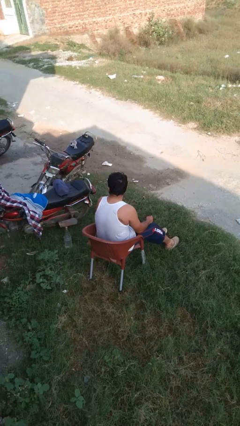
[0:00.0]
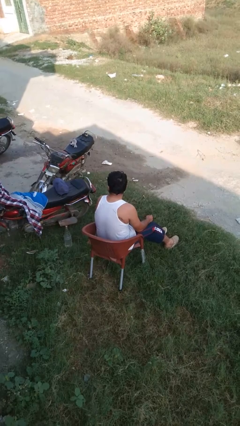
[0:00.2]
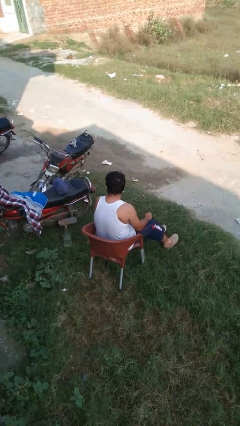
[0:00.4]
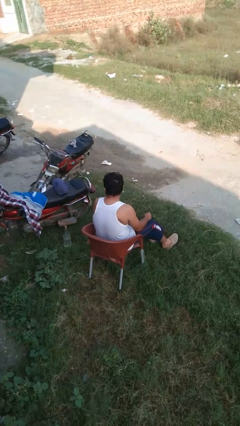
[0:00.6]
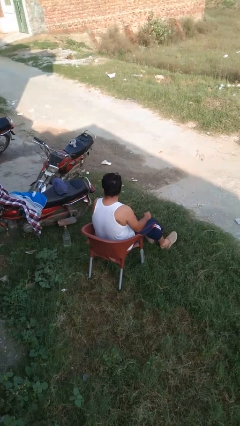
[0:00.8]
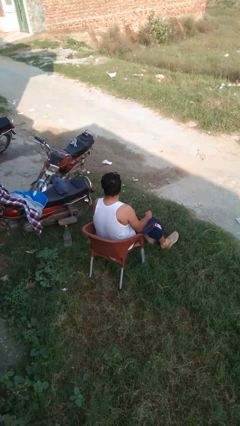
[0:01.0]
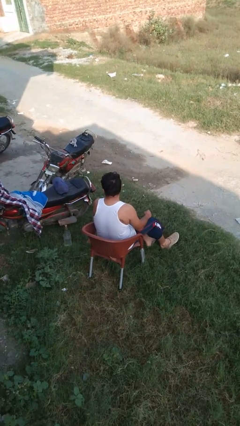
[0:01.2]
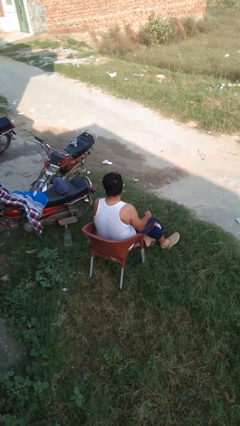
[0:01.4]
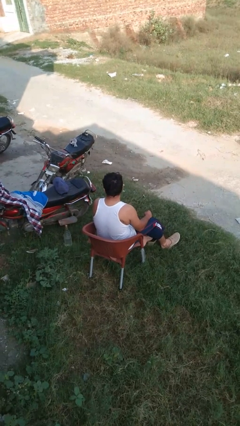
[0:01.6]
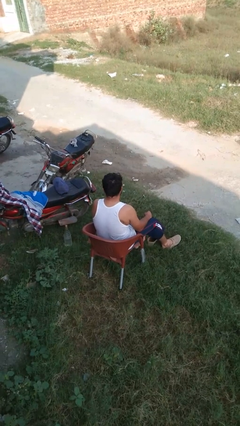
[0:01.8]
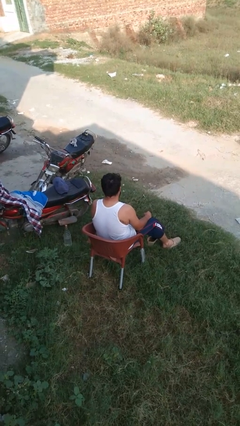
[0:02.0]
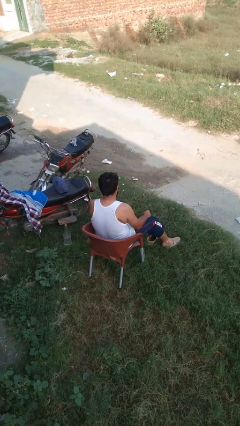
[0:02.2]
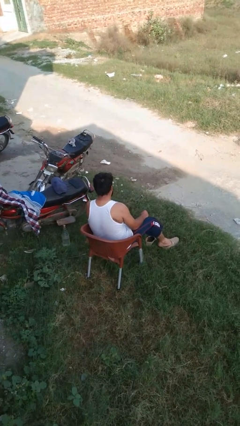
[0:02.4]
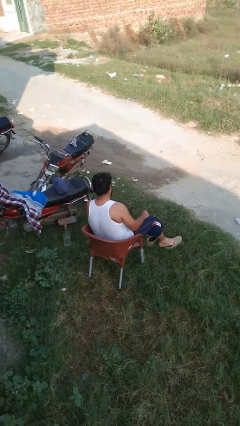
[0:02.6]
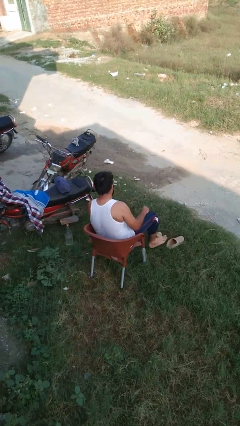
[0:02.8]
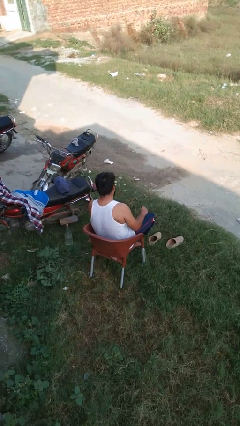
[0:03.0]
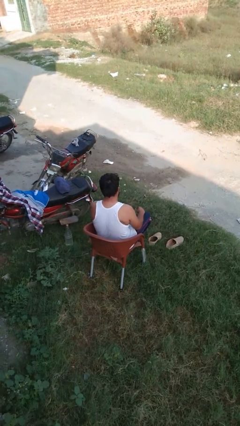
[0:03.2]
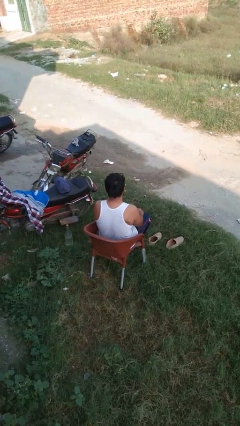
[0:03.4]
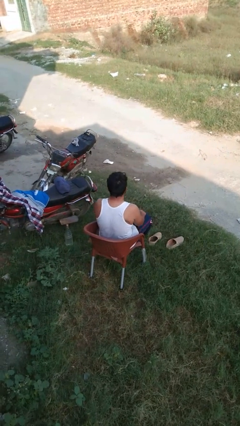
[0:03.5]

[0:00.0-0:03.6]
person takes off shoes

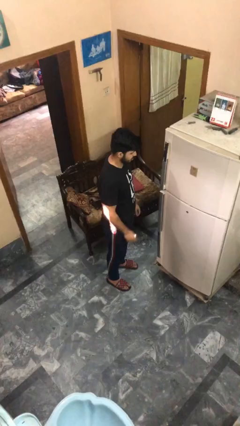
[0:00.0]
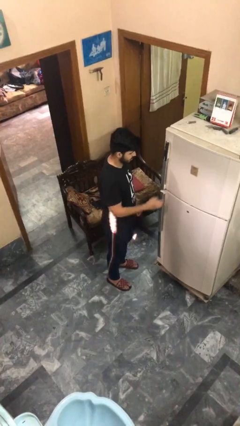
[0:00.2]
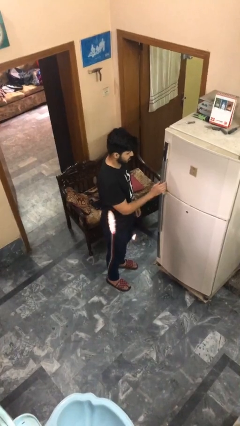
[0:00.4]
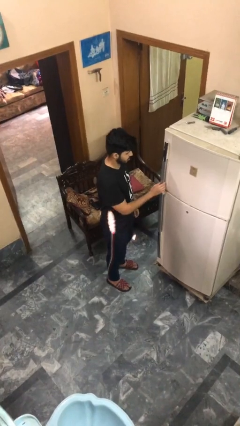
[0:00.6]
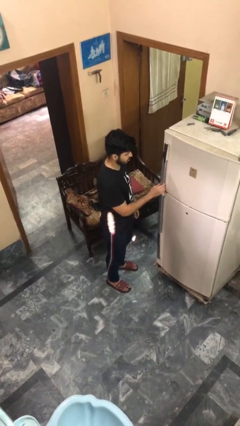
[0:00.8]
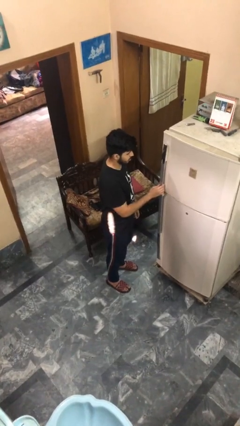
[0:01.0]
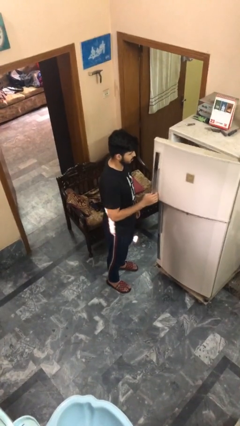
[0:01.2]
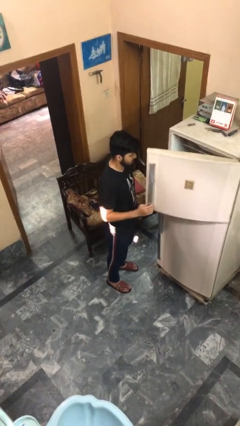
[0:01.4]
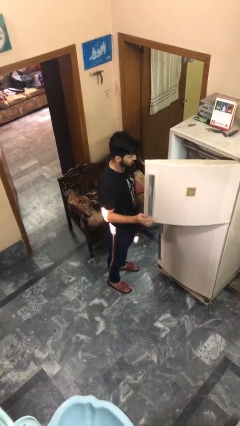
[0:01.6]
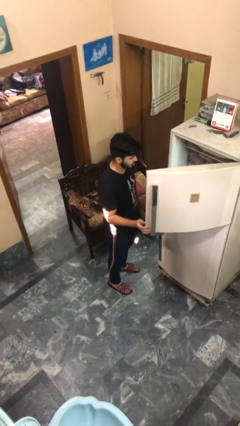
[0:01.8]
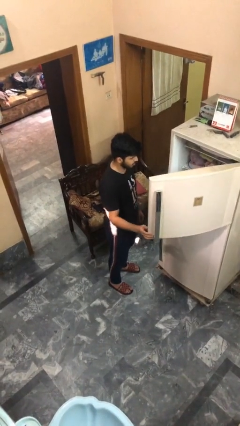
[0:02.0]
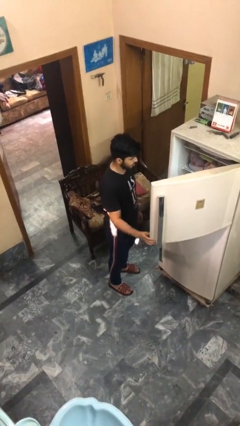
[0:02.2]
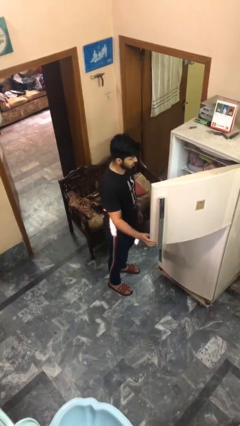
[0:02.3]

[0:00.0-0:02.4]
person opens refrigerator

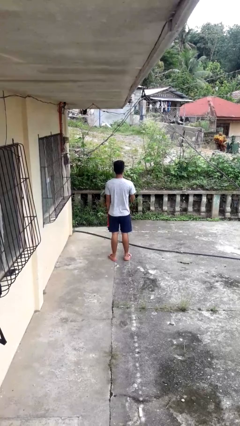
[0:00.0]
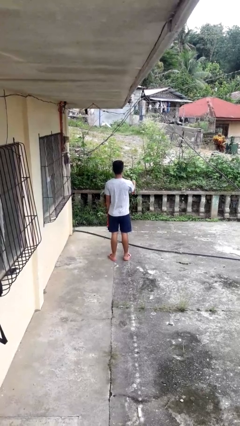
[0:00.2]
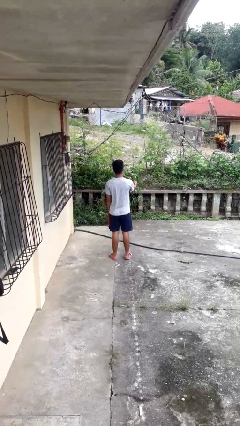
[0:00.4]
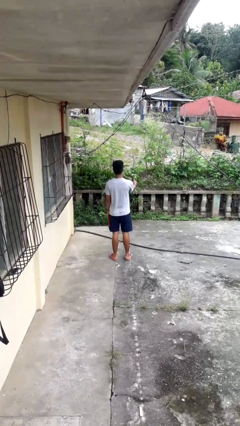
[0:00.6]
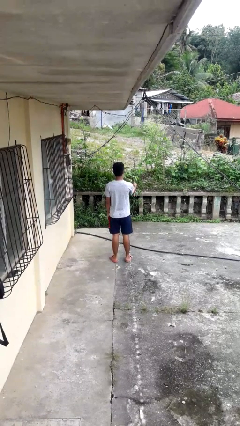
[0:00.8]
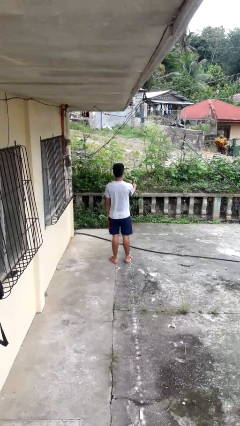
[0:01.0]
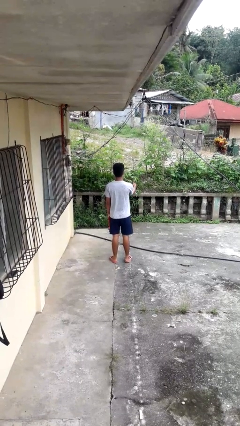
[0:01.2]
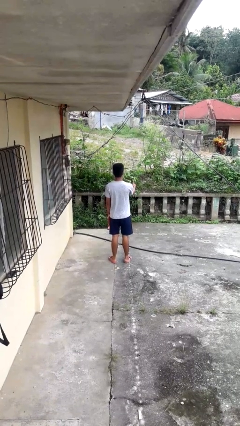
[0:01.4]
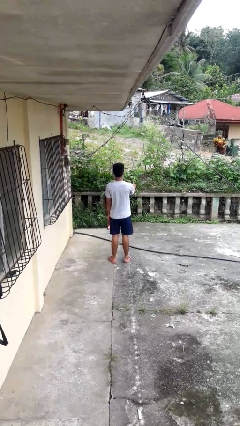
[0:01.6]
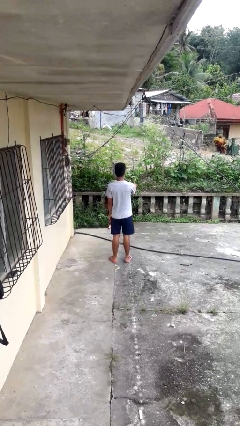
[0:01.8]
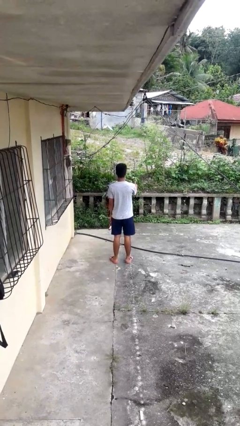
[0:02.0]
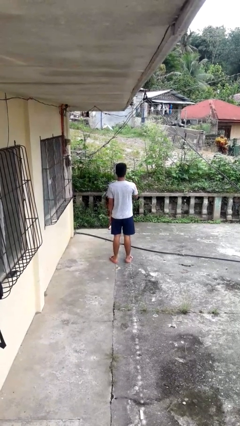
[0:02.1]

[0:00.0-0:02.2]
person gestures thumbs up

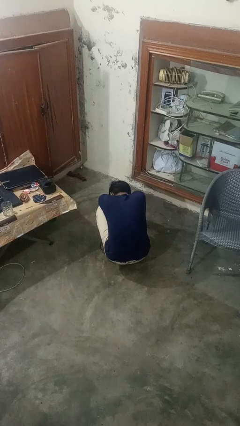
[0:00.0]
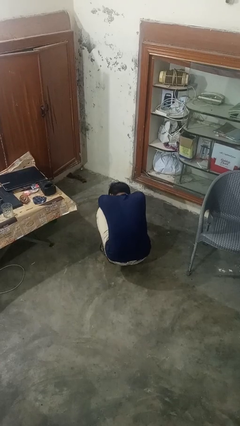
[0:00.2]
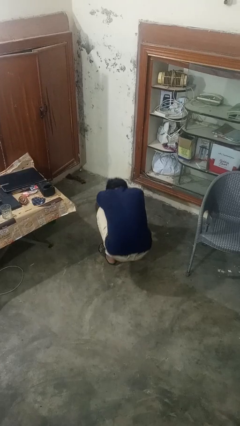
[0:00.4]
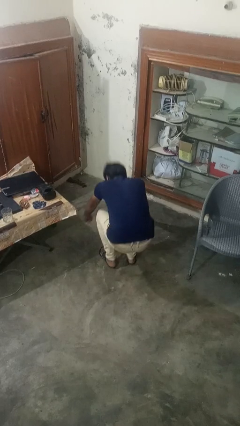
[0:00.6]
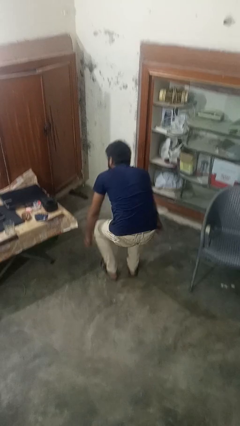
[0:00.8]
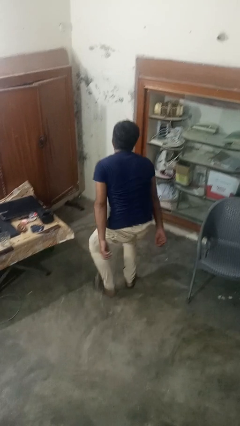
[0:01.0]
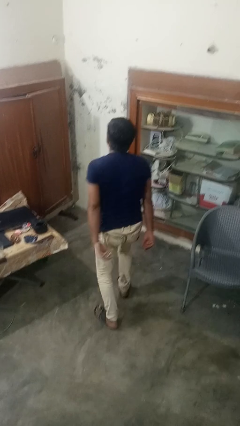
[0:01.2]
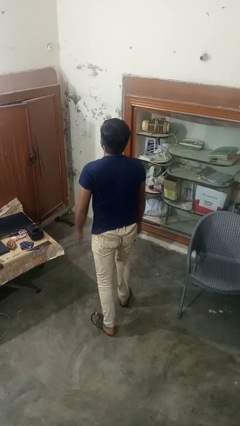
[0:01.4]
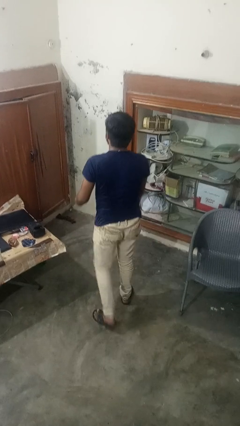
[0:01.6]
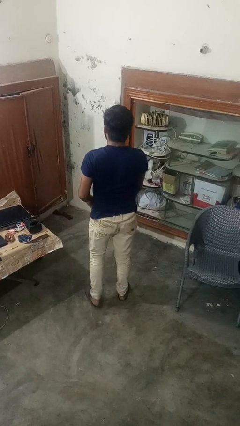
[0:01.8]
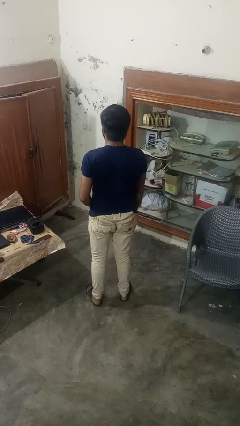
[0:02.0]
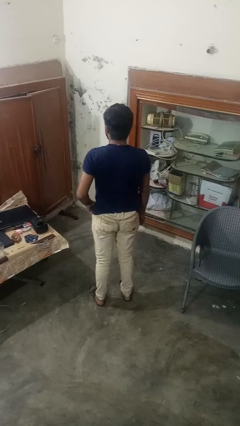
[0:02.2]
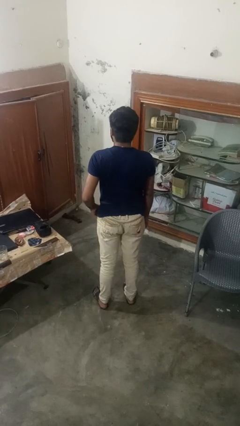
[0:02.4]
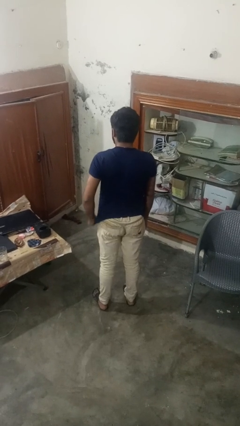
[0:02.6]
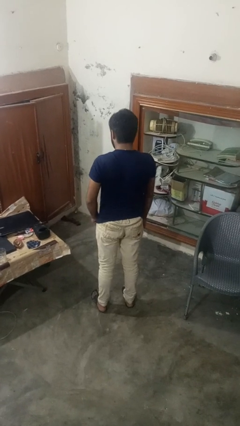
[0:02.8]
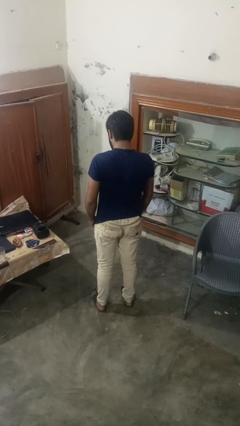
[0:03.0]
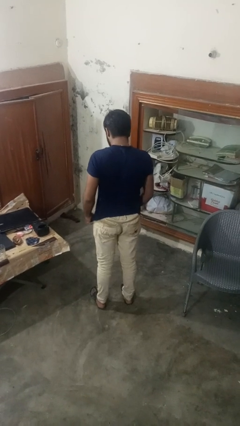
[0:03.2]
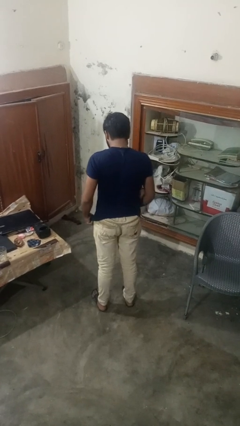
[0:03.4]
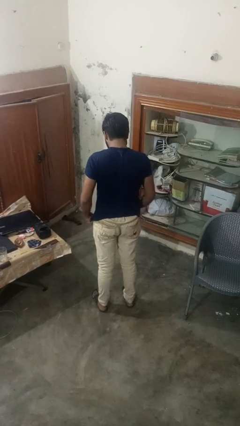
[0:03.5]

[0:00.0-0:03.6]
person stands up

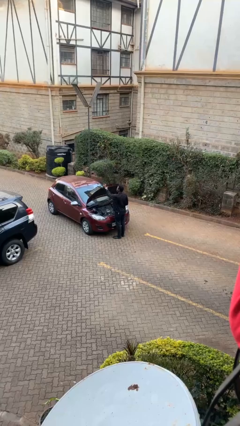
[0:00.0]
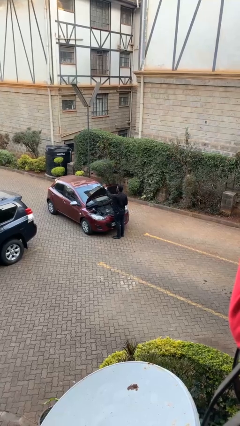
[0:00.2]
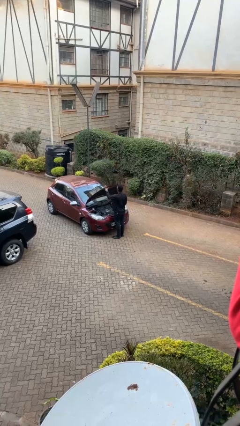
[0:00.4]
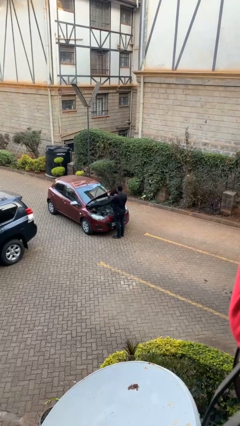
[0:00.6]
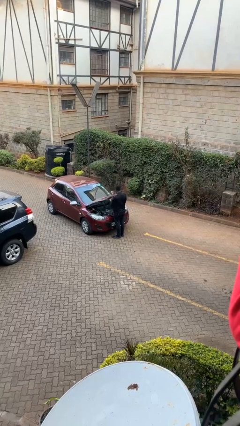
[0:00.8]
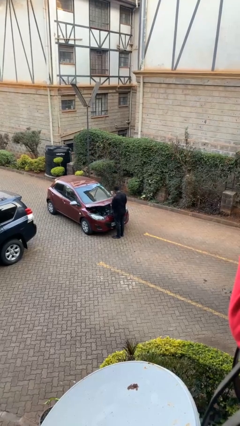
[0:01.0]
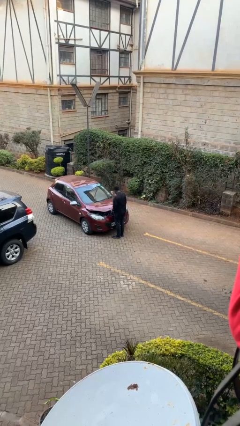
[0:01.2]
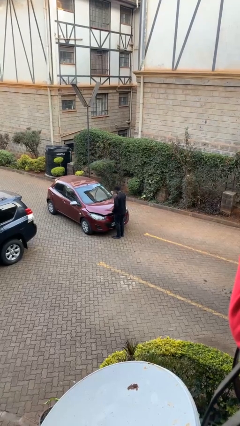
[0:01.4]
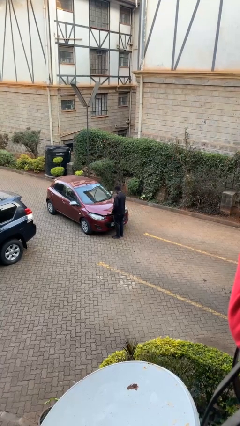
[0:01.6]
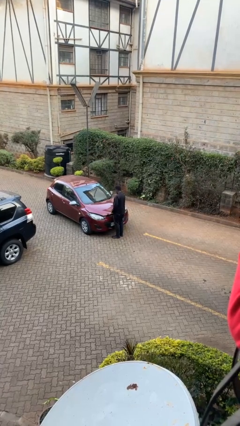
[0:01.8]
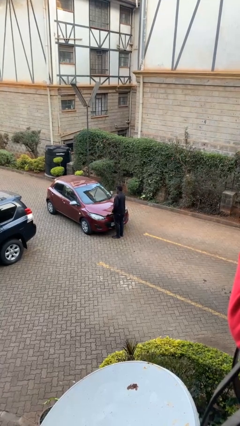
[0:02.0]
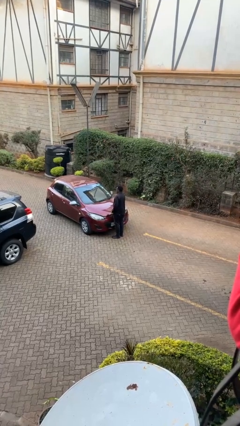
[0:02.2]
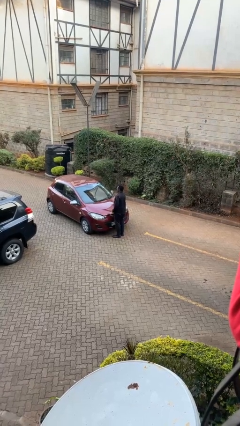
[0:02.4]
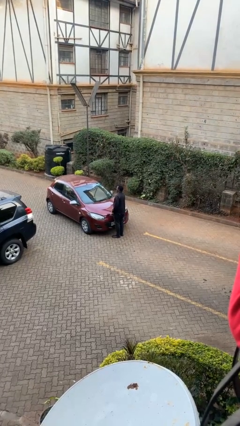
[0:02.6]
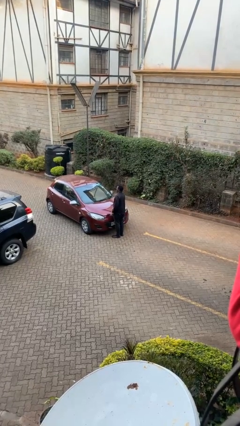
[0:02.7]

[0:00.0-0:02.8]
person closes car hood

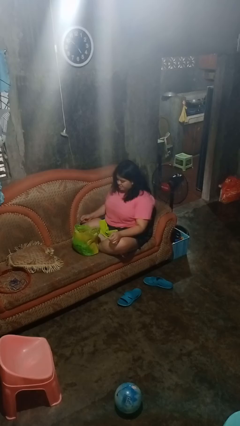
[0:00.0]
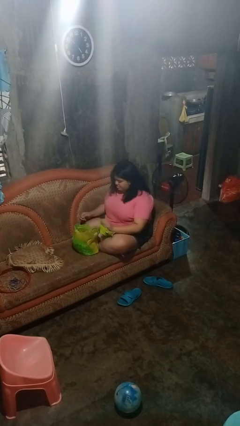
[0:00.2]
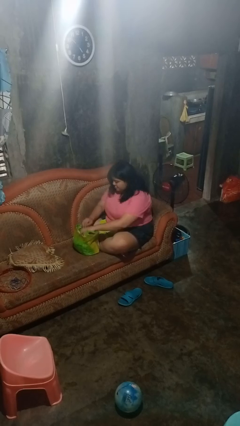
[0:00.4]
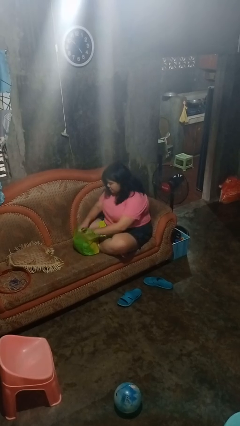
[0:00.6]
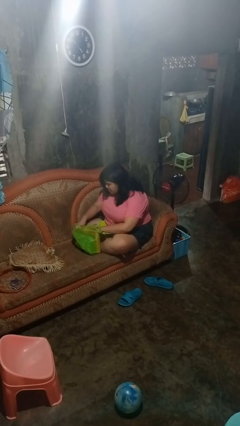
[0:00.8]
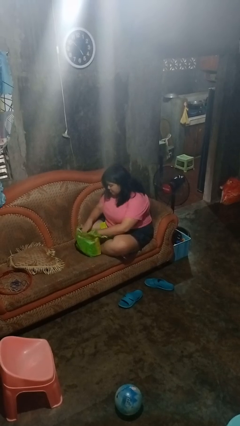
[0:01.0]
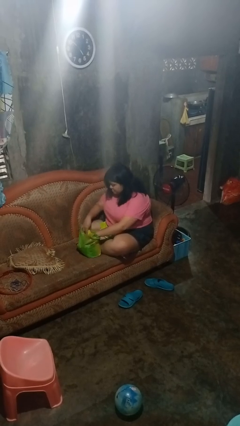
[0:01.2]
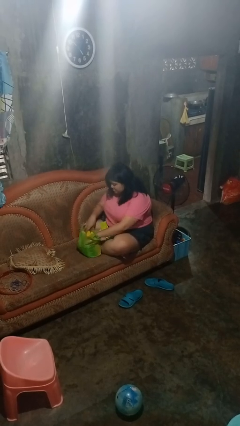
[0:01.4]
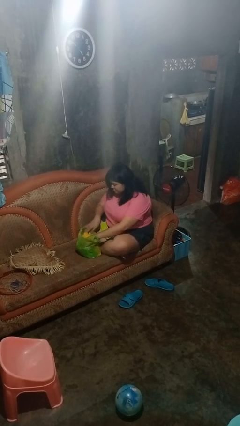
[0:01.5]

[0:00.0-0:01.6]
person searches in bag

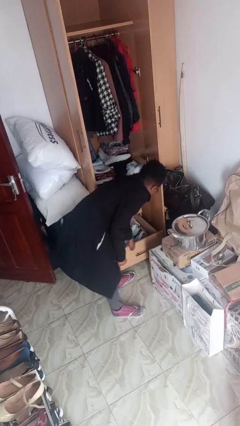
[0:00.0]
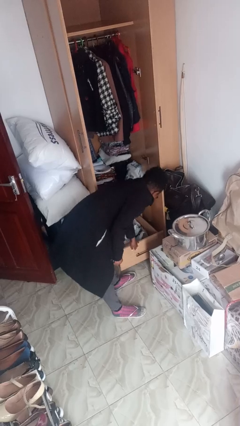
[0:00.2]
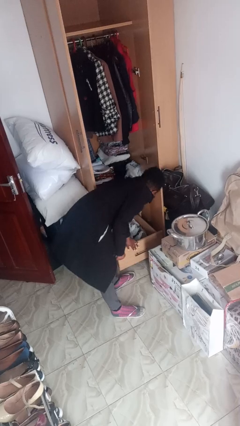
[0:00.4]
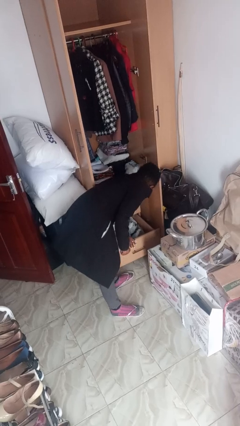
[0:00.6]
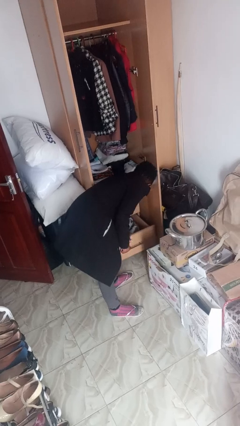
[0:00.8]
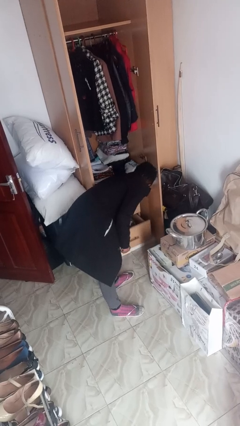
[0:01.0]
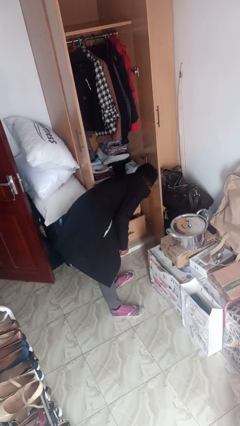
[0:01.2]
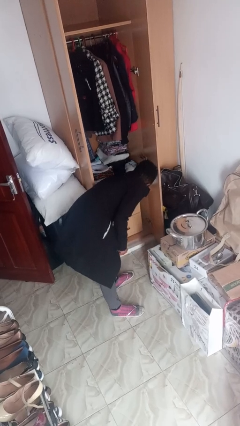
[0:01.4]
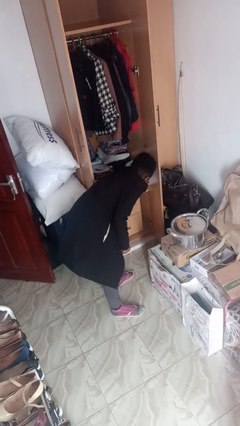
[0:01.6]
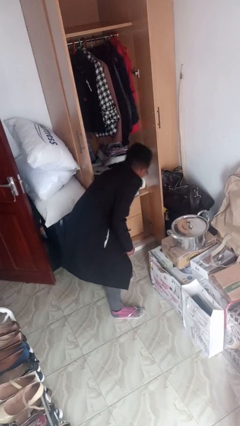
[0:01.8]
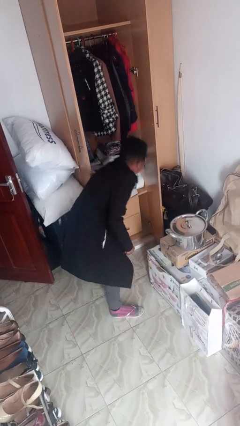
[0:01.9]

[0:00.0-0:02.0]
person closes dresser drawer
